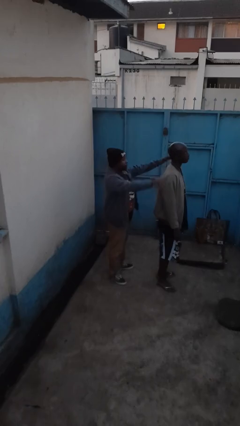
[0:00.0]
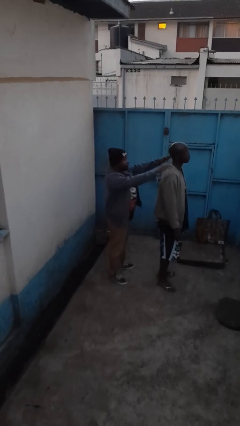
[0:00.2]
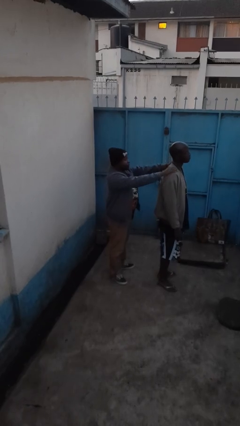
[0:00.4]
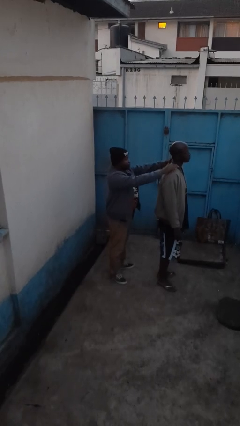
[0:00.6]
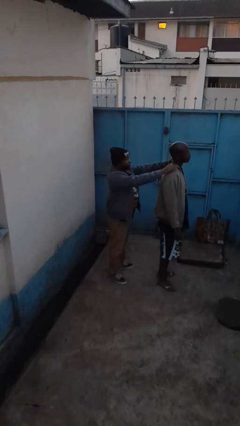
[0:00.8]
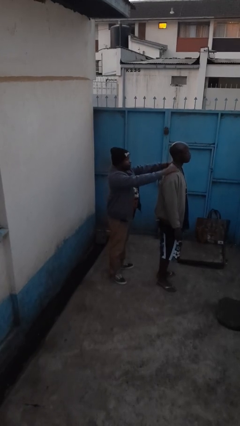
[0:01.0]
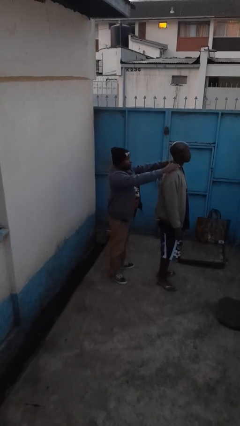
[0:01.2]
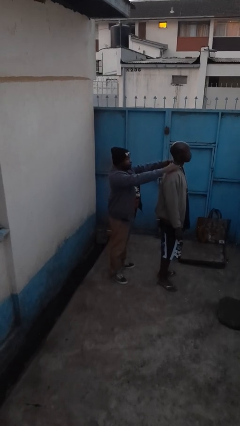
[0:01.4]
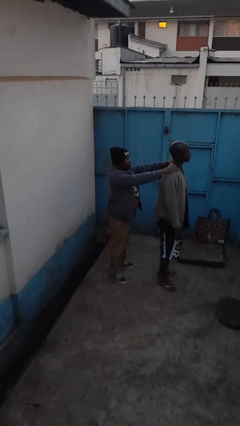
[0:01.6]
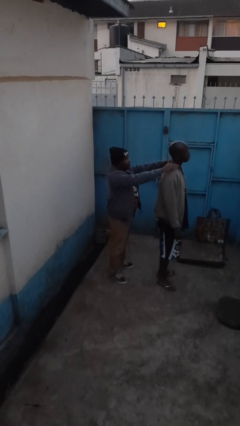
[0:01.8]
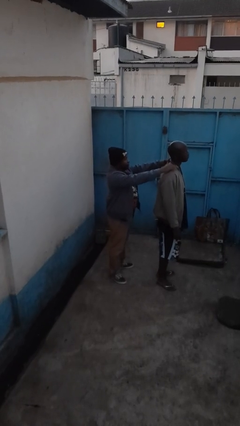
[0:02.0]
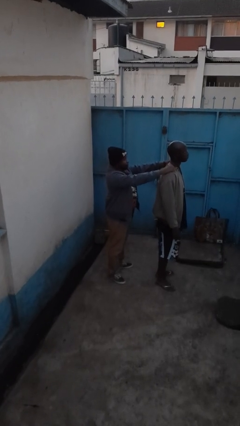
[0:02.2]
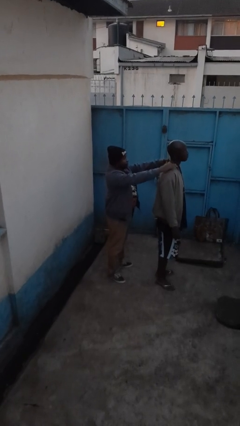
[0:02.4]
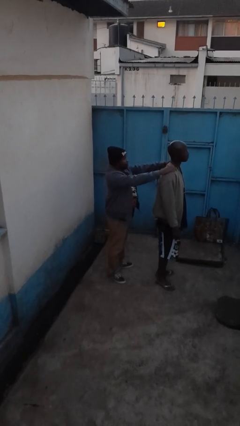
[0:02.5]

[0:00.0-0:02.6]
person pounds shoulders of person

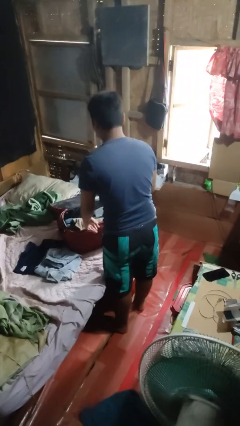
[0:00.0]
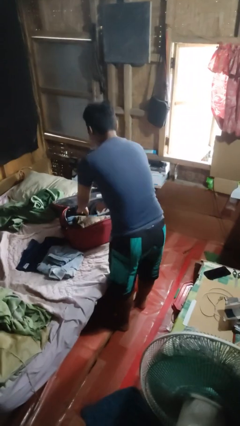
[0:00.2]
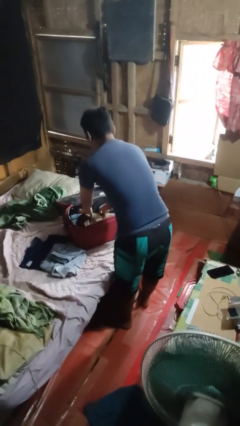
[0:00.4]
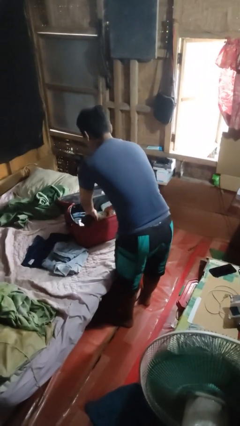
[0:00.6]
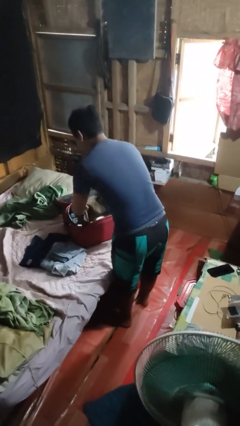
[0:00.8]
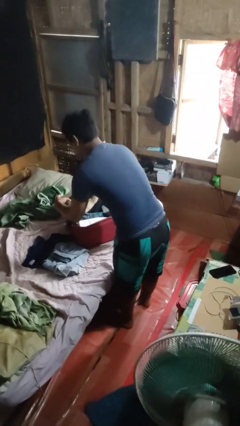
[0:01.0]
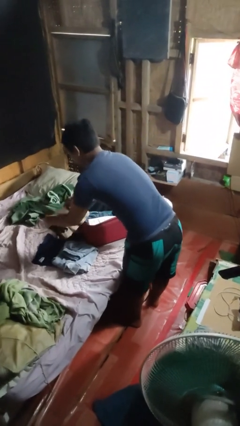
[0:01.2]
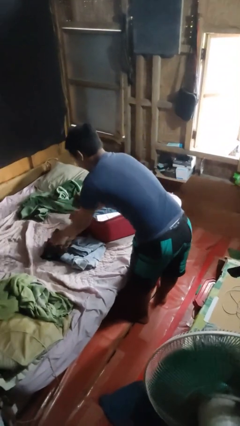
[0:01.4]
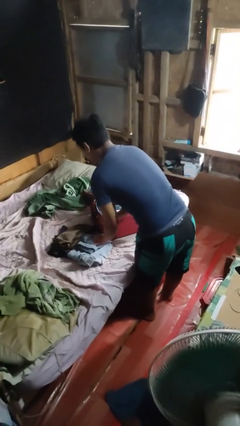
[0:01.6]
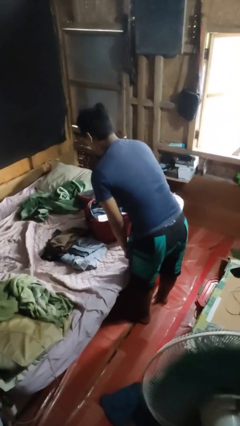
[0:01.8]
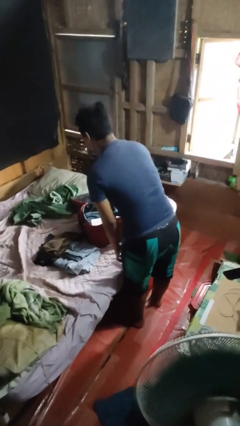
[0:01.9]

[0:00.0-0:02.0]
person unloads clothes from suitcase

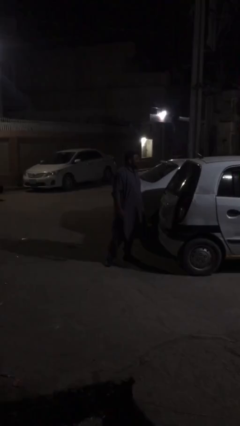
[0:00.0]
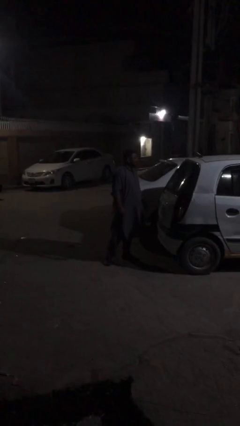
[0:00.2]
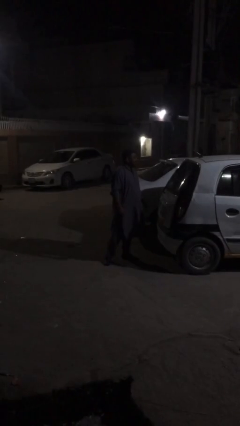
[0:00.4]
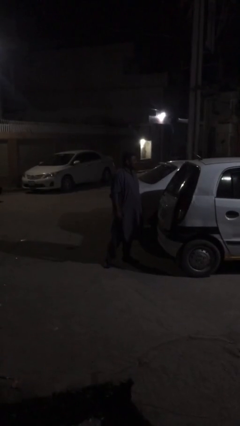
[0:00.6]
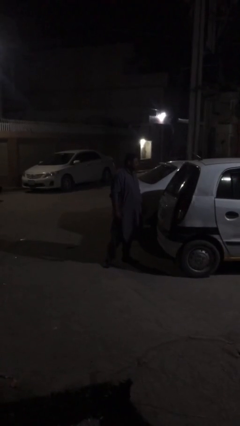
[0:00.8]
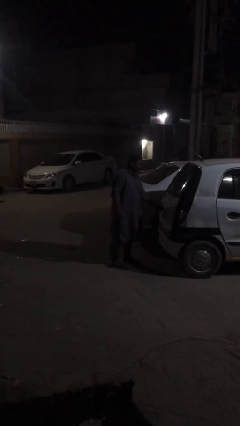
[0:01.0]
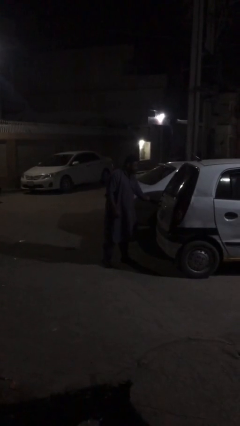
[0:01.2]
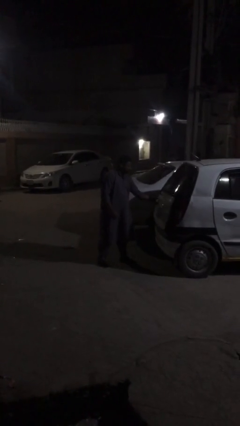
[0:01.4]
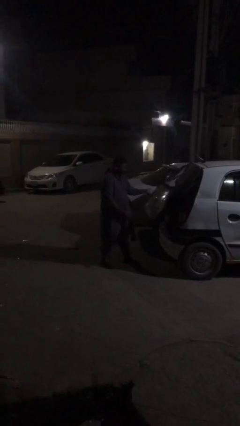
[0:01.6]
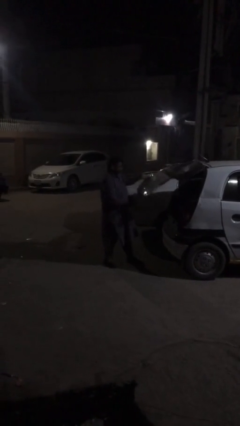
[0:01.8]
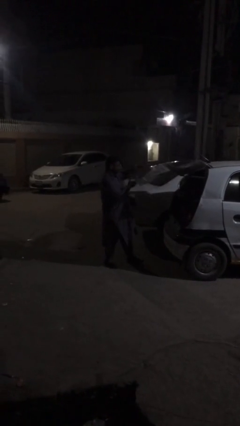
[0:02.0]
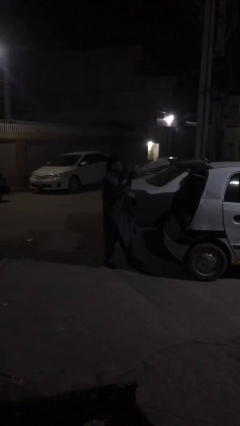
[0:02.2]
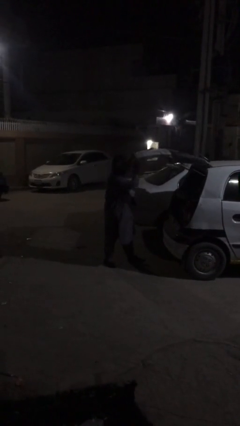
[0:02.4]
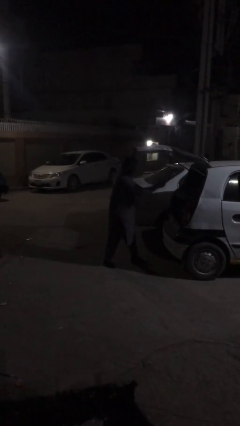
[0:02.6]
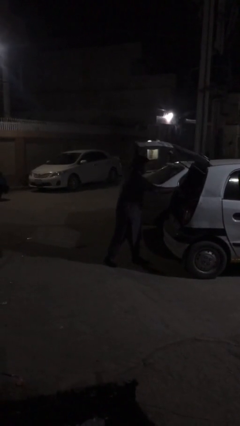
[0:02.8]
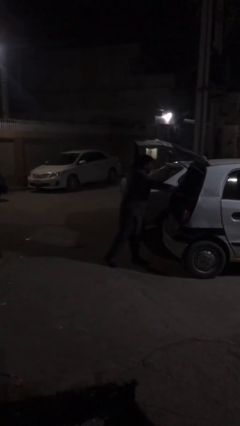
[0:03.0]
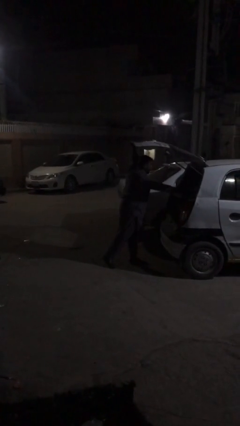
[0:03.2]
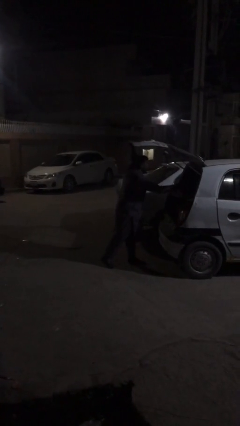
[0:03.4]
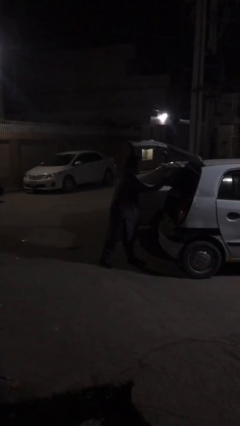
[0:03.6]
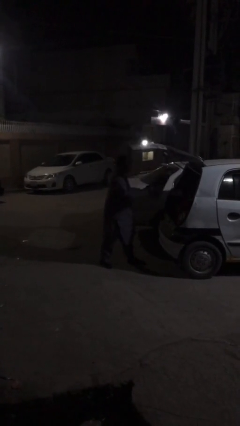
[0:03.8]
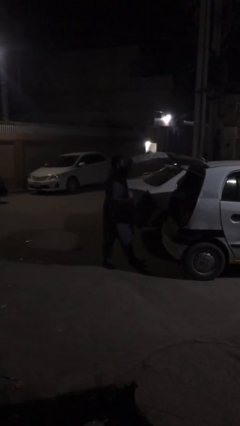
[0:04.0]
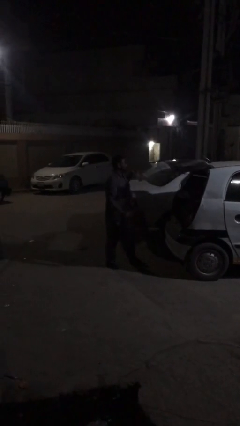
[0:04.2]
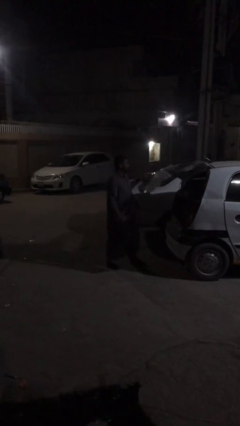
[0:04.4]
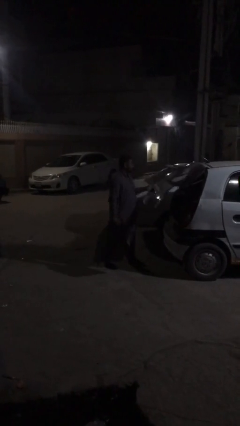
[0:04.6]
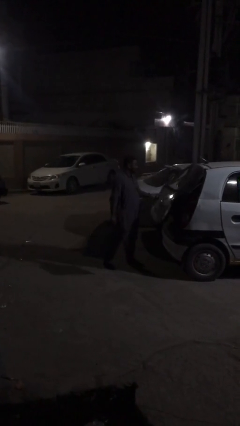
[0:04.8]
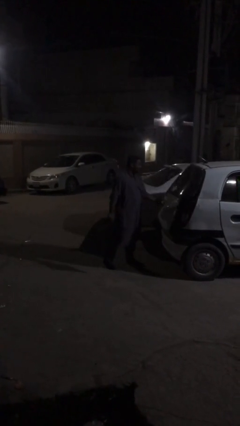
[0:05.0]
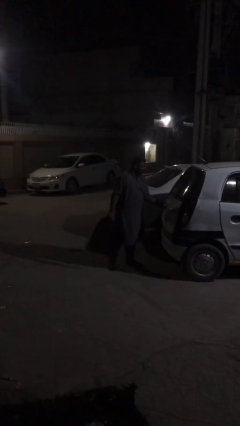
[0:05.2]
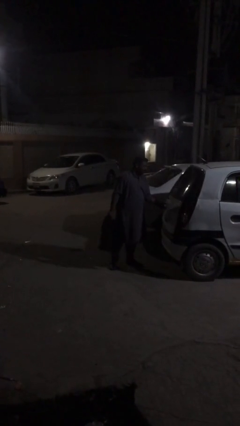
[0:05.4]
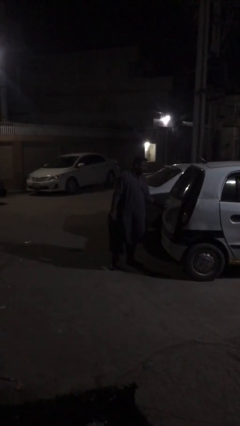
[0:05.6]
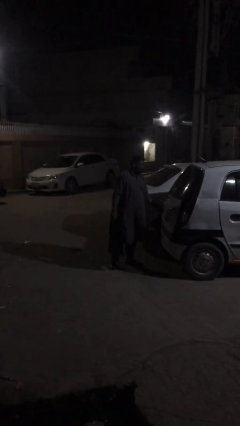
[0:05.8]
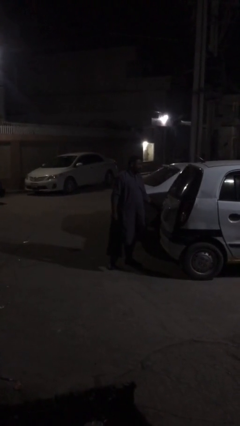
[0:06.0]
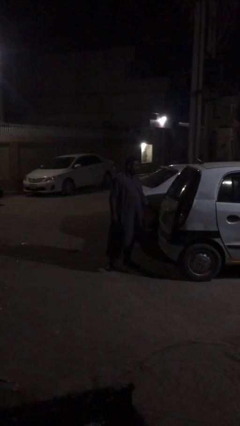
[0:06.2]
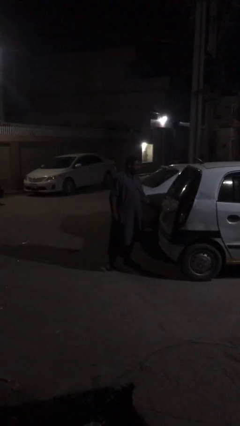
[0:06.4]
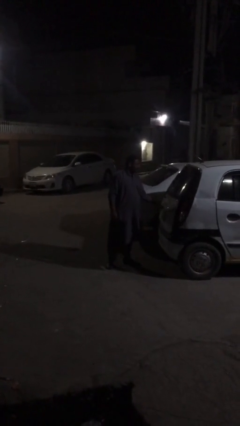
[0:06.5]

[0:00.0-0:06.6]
person unloads car

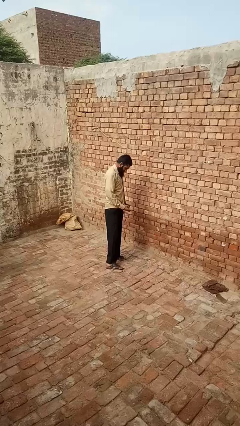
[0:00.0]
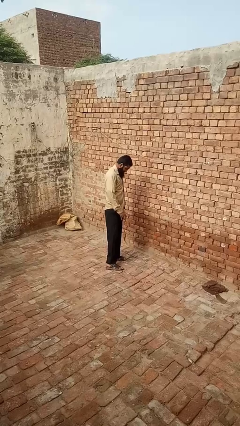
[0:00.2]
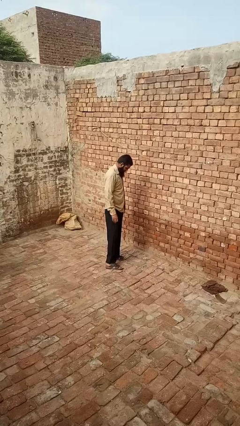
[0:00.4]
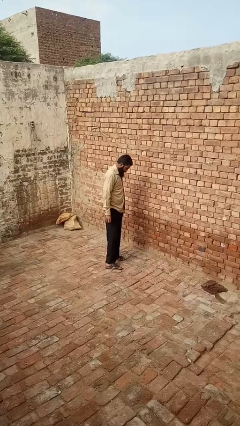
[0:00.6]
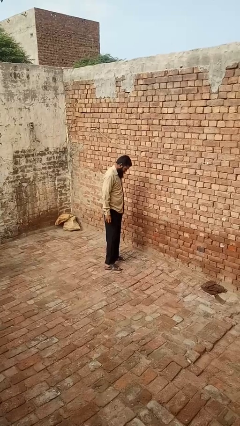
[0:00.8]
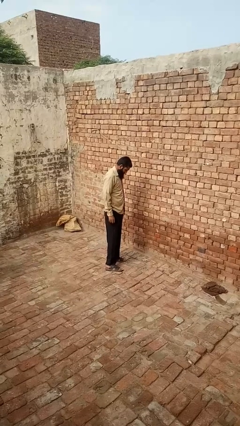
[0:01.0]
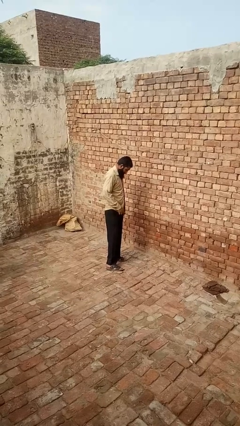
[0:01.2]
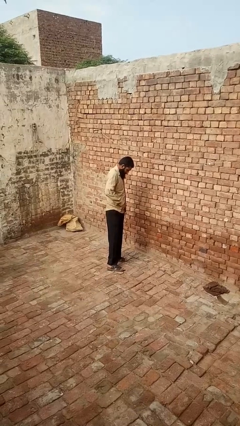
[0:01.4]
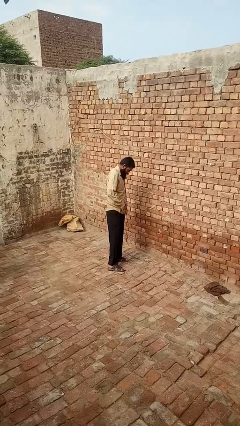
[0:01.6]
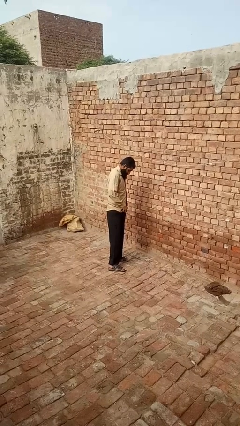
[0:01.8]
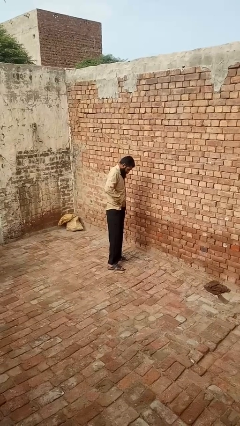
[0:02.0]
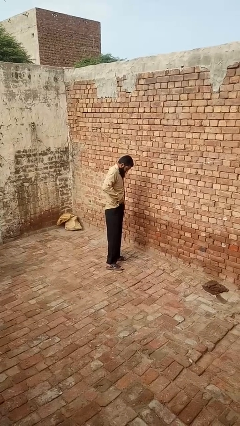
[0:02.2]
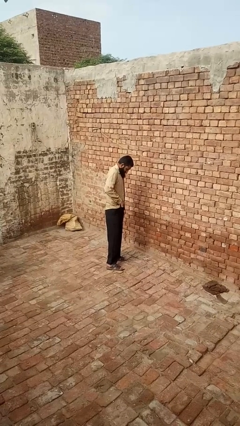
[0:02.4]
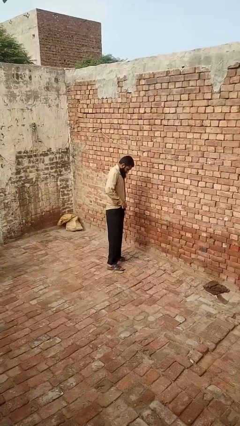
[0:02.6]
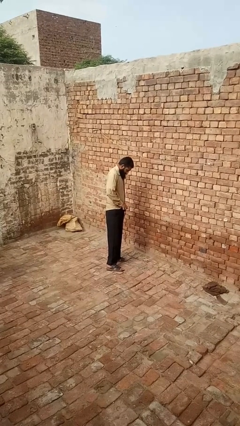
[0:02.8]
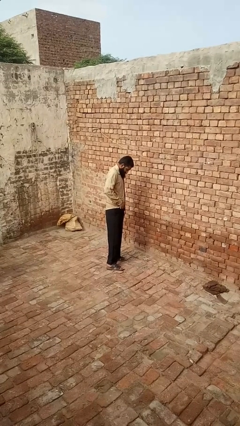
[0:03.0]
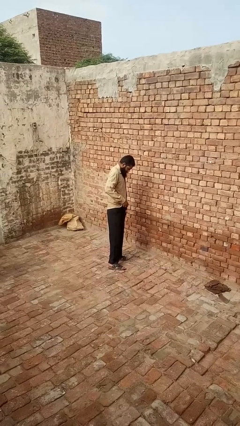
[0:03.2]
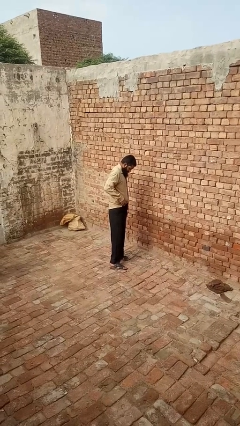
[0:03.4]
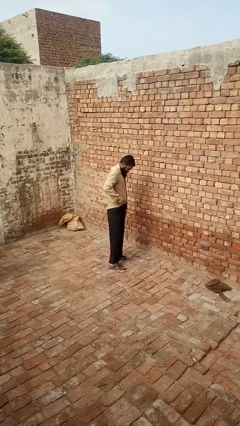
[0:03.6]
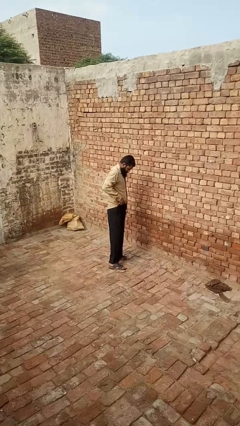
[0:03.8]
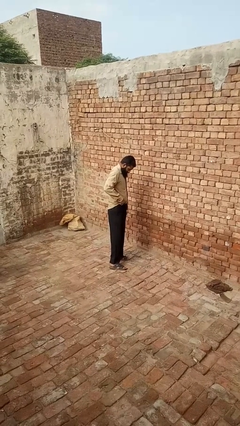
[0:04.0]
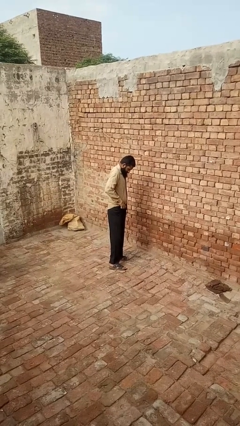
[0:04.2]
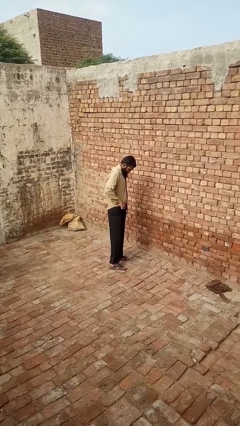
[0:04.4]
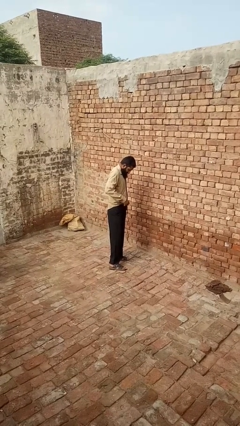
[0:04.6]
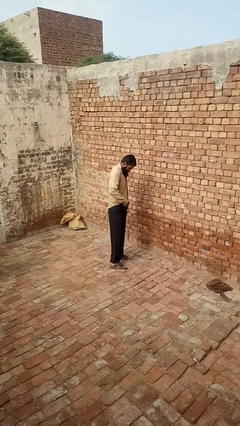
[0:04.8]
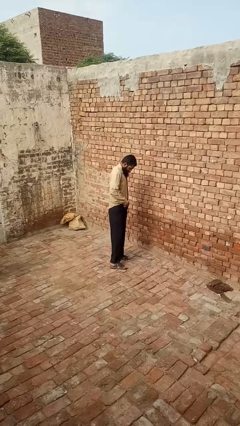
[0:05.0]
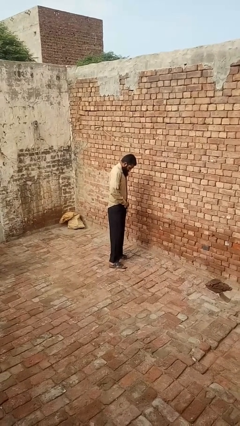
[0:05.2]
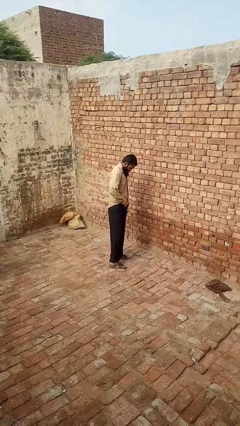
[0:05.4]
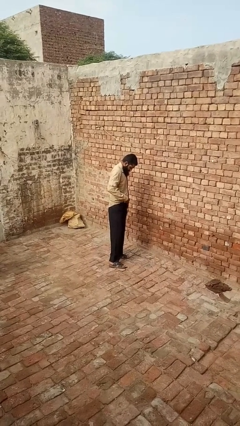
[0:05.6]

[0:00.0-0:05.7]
person tucks in shirt

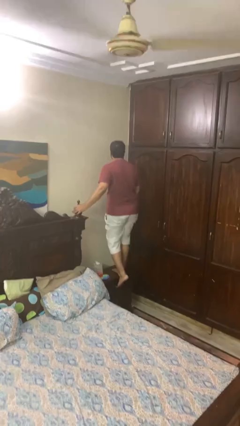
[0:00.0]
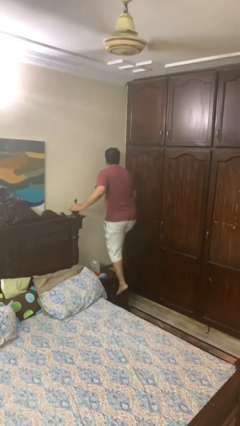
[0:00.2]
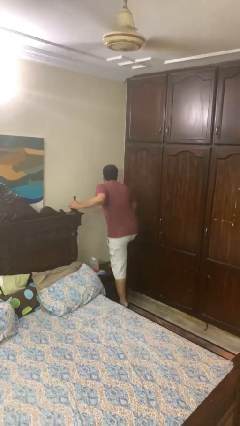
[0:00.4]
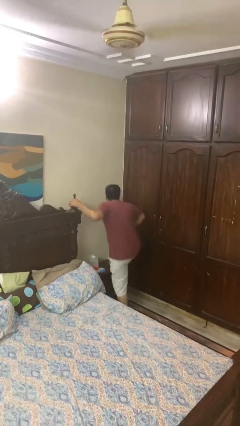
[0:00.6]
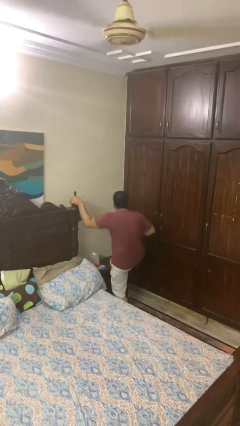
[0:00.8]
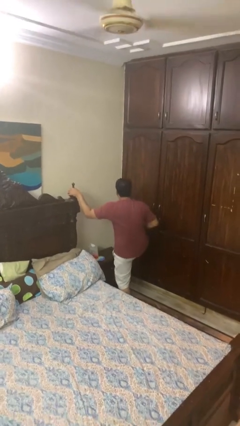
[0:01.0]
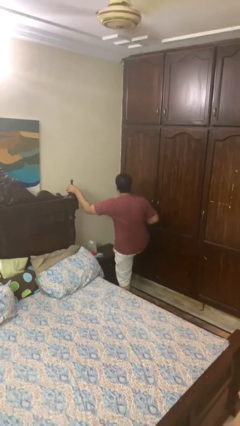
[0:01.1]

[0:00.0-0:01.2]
person climbs off table
